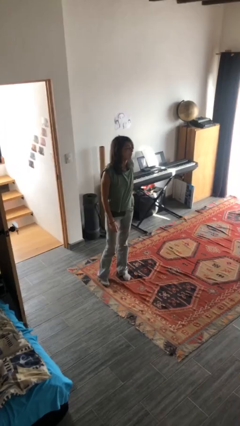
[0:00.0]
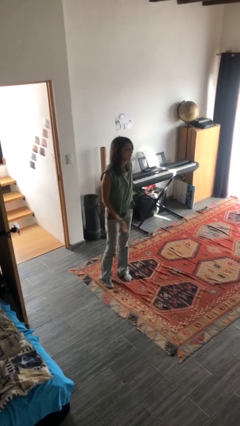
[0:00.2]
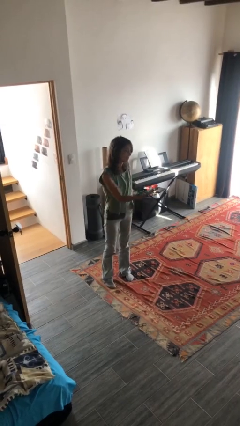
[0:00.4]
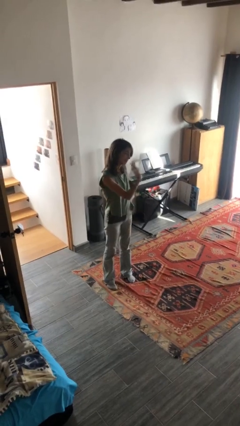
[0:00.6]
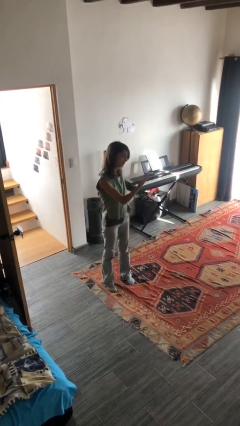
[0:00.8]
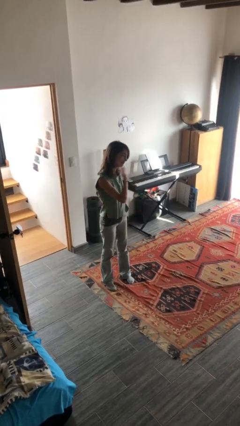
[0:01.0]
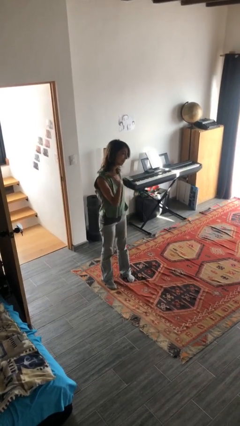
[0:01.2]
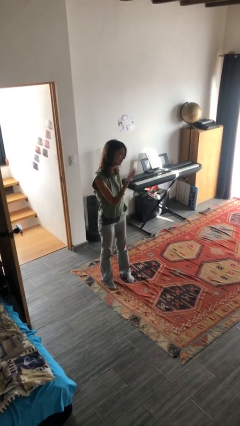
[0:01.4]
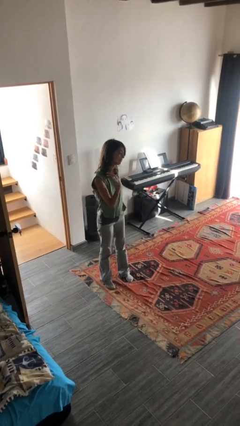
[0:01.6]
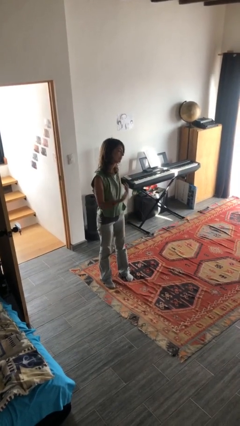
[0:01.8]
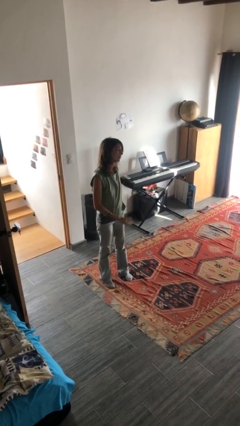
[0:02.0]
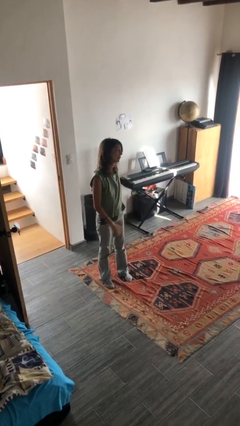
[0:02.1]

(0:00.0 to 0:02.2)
person gestures come here

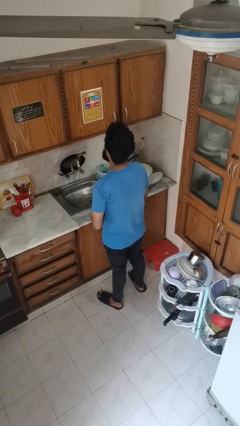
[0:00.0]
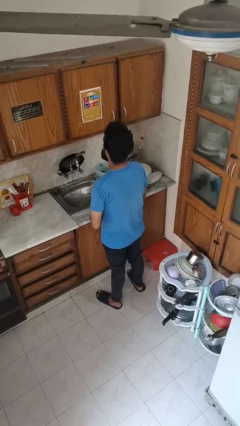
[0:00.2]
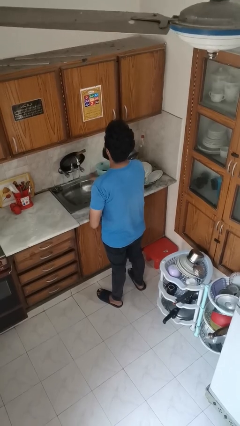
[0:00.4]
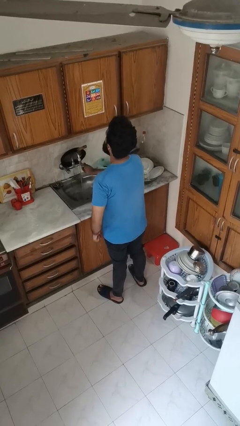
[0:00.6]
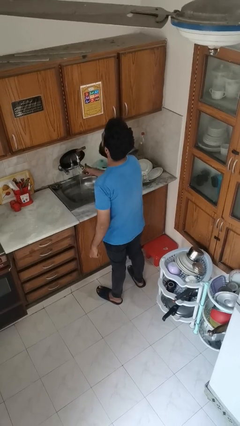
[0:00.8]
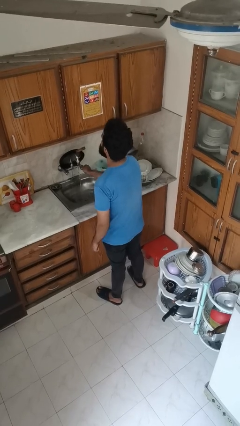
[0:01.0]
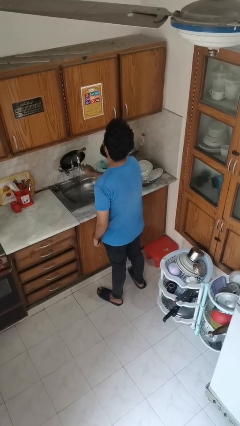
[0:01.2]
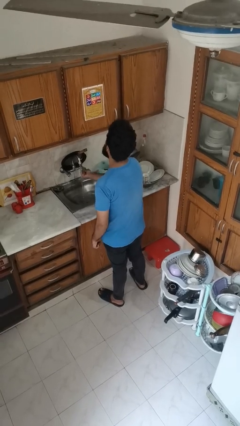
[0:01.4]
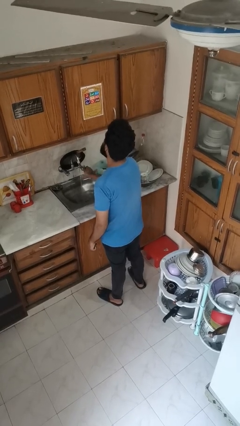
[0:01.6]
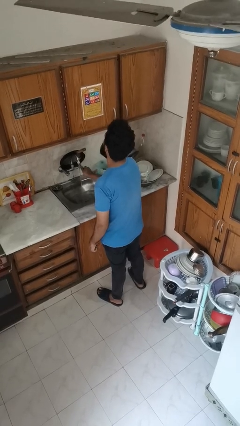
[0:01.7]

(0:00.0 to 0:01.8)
person turns off faucet

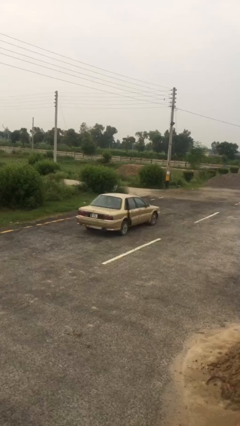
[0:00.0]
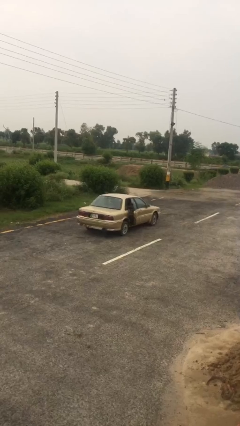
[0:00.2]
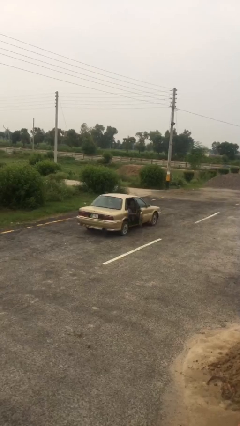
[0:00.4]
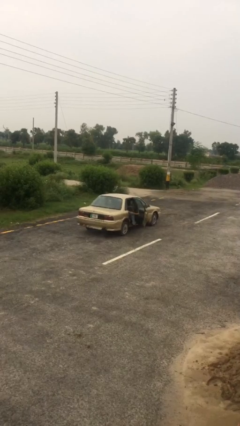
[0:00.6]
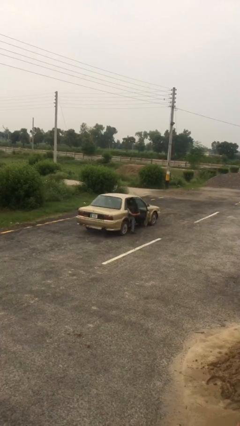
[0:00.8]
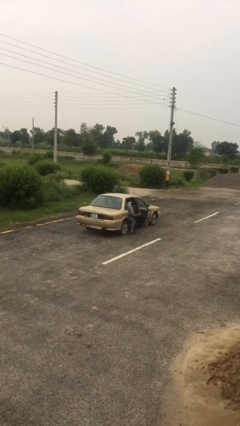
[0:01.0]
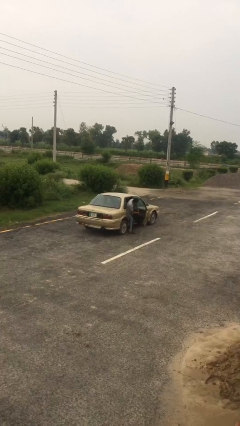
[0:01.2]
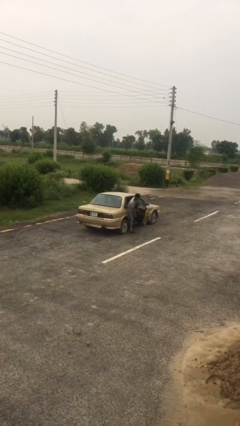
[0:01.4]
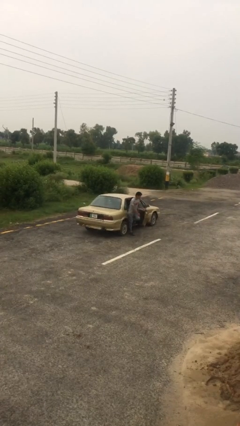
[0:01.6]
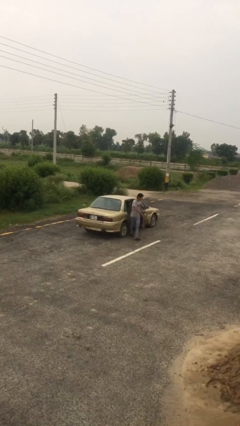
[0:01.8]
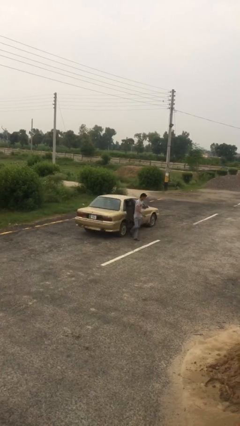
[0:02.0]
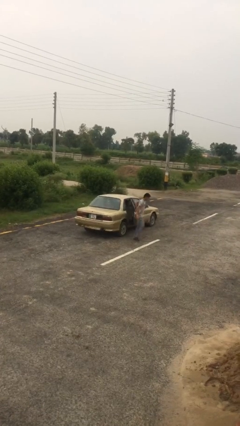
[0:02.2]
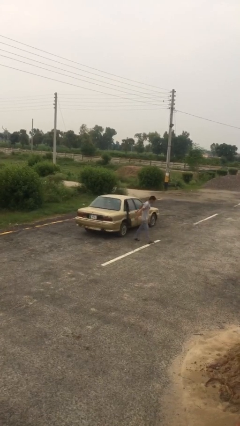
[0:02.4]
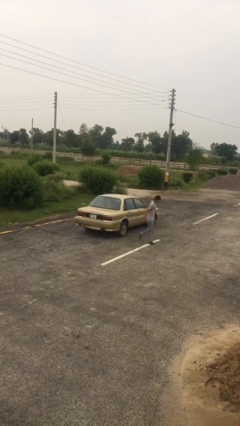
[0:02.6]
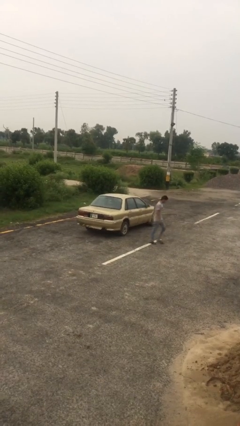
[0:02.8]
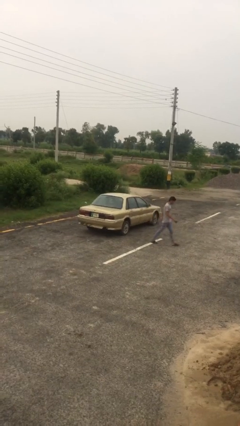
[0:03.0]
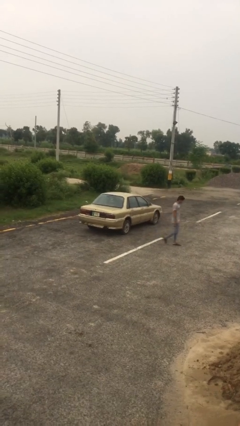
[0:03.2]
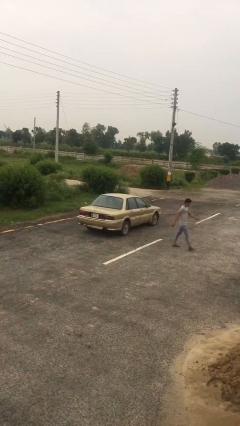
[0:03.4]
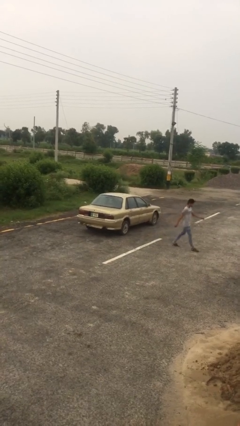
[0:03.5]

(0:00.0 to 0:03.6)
car drops off person

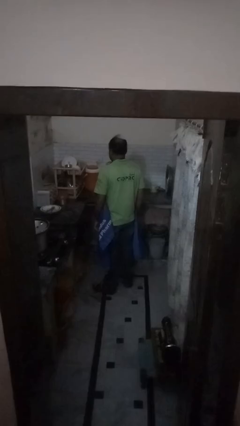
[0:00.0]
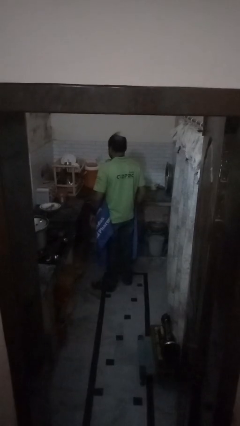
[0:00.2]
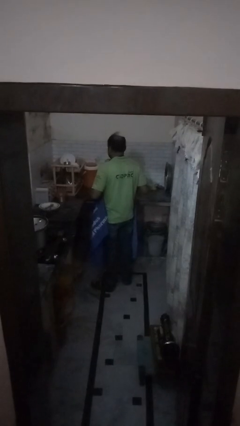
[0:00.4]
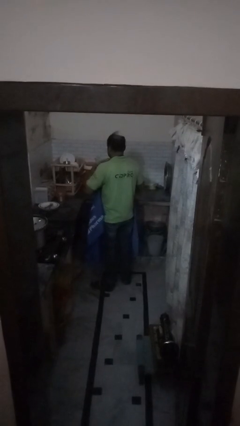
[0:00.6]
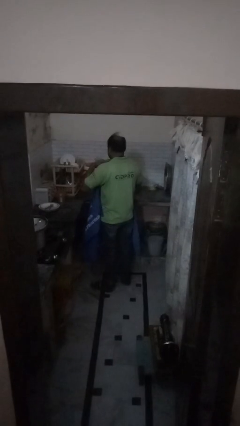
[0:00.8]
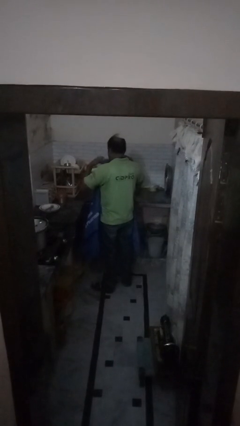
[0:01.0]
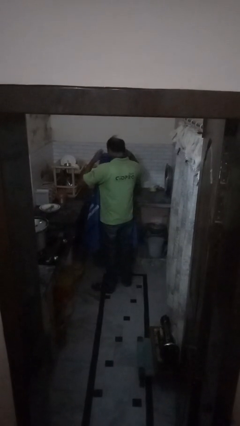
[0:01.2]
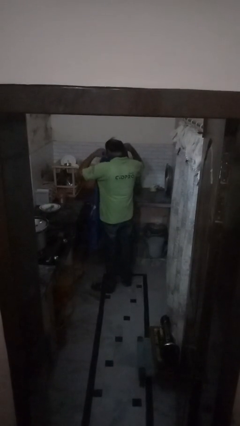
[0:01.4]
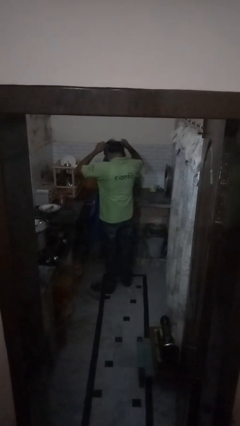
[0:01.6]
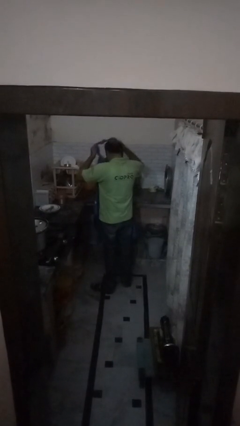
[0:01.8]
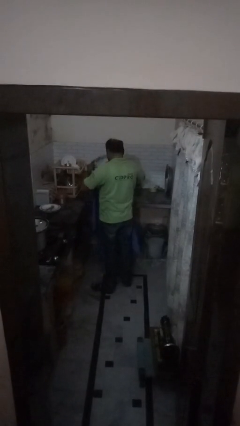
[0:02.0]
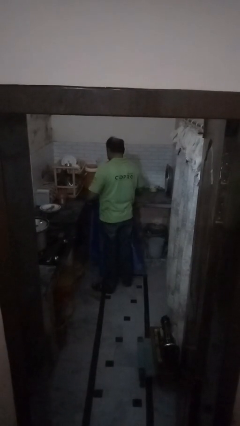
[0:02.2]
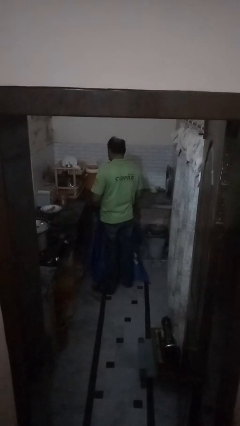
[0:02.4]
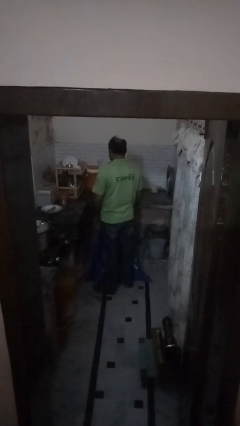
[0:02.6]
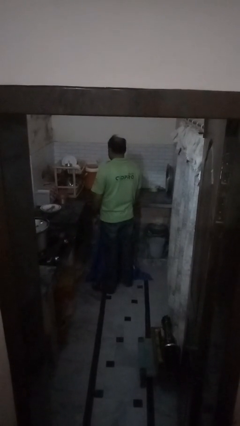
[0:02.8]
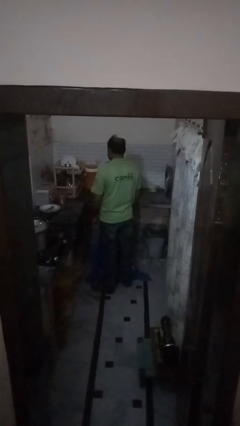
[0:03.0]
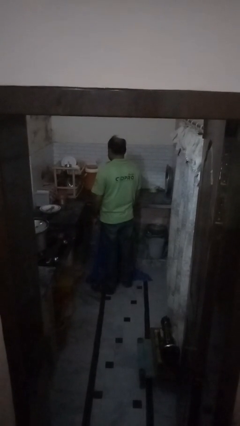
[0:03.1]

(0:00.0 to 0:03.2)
person takes off apron

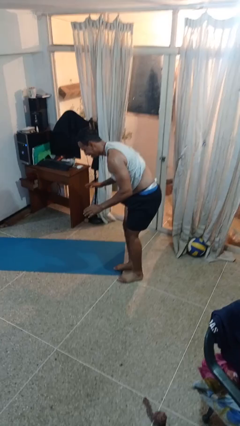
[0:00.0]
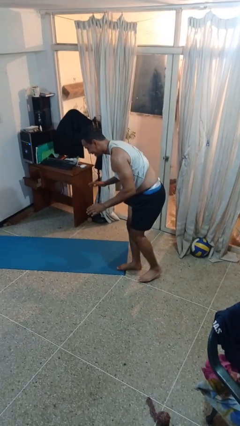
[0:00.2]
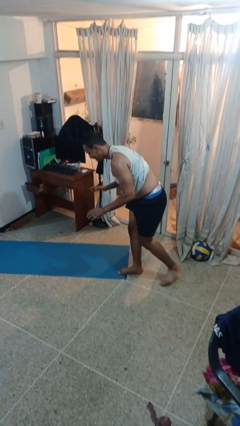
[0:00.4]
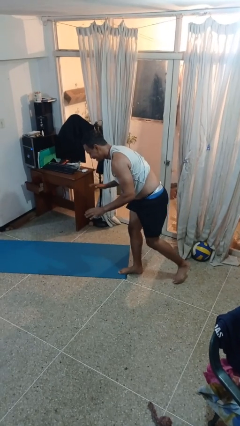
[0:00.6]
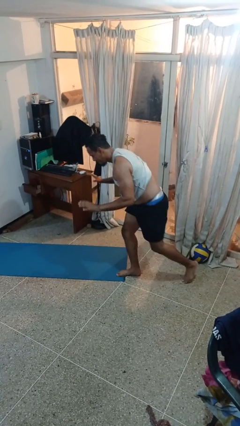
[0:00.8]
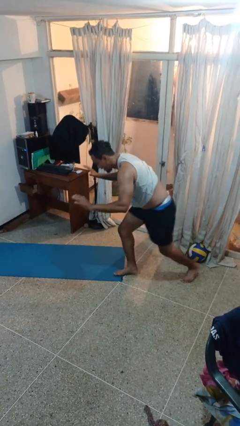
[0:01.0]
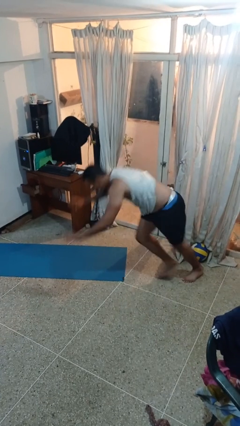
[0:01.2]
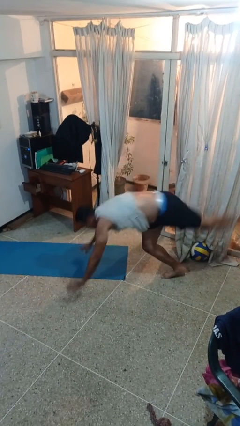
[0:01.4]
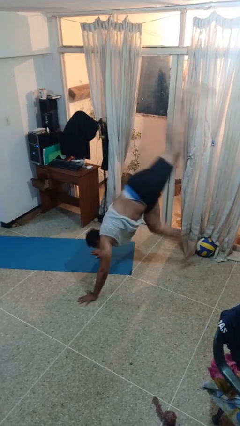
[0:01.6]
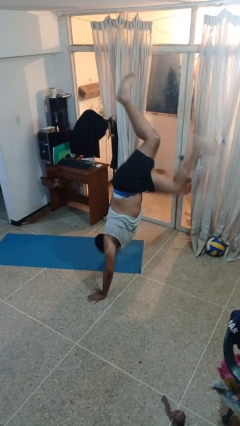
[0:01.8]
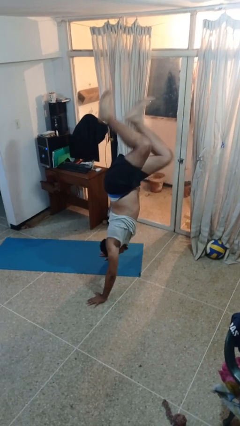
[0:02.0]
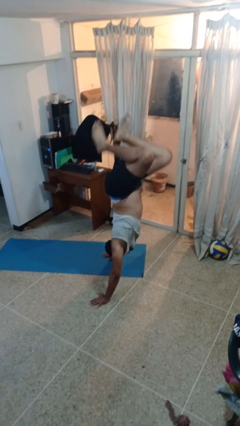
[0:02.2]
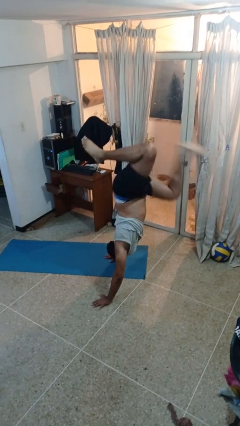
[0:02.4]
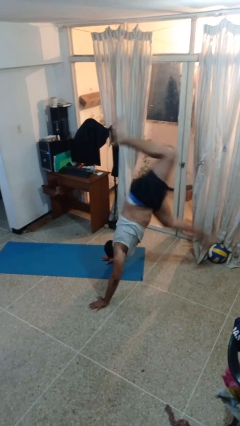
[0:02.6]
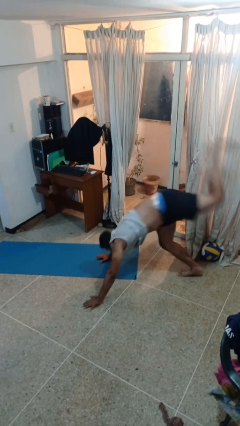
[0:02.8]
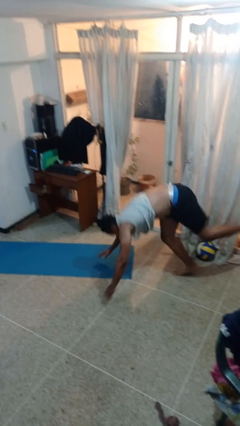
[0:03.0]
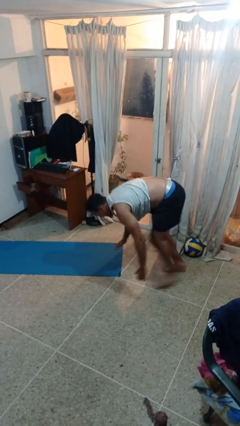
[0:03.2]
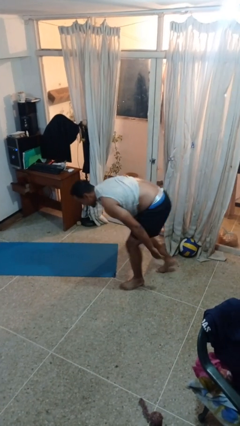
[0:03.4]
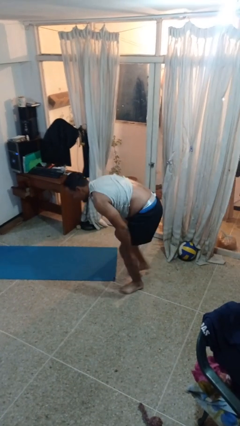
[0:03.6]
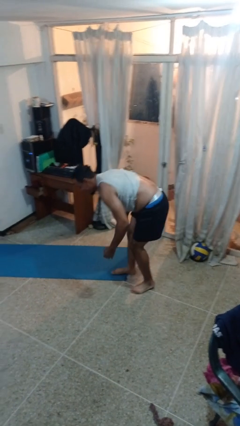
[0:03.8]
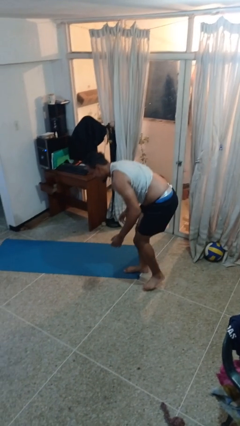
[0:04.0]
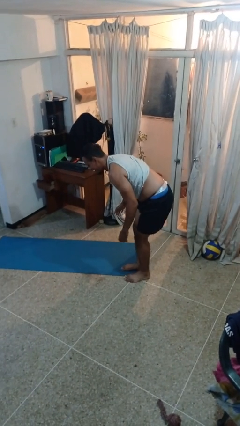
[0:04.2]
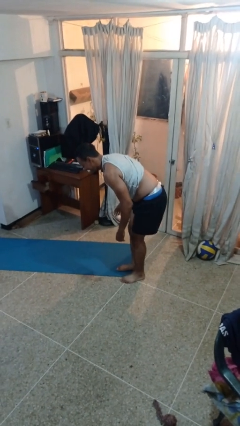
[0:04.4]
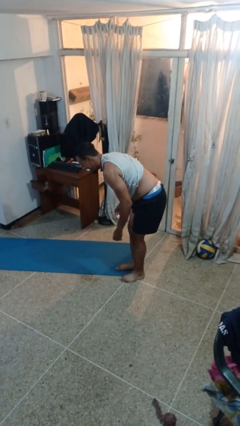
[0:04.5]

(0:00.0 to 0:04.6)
person handstand

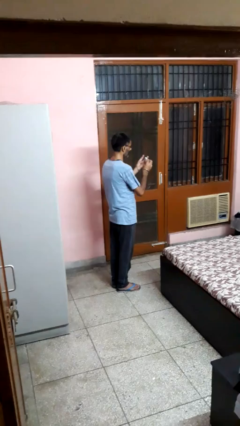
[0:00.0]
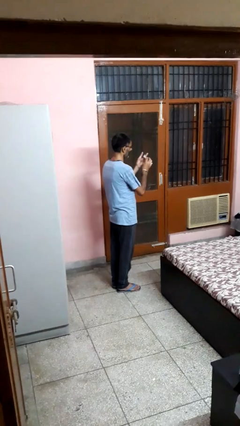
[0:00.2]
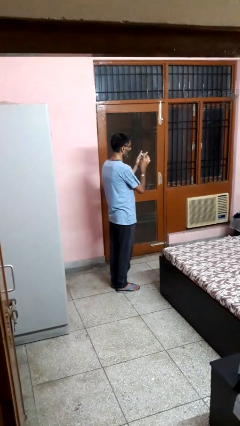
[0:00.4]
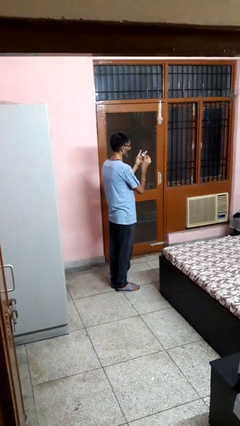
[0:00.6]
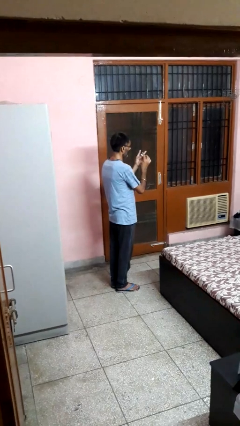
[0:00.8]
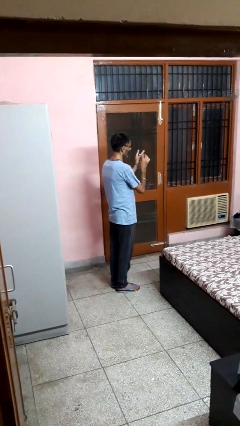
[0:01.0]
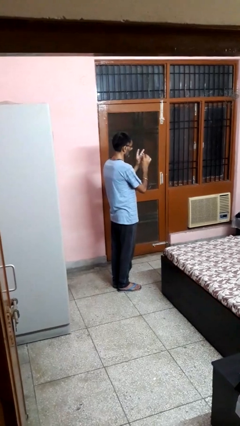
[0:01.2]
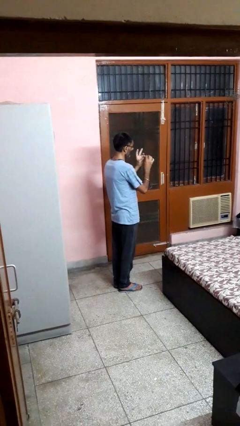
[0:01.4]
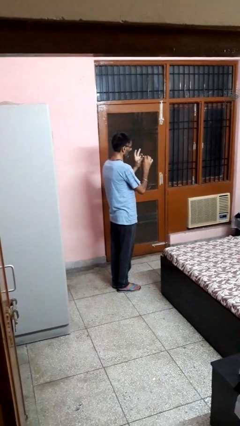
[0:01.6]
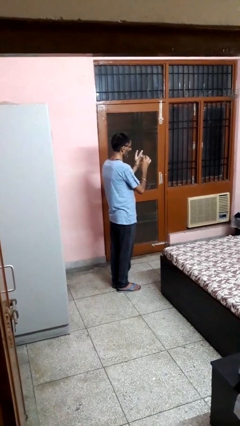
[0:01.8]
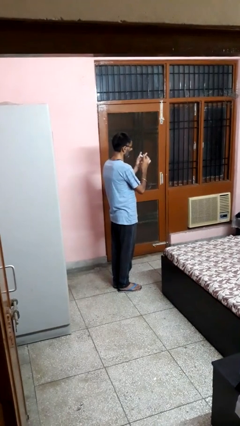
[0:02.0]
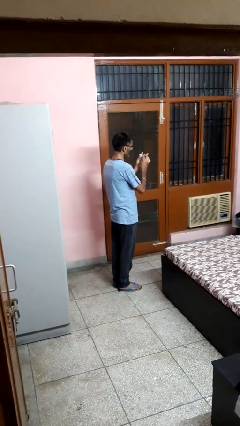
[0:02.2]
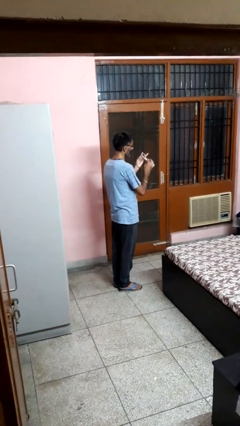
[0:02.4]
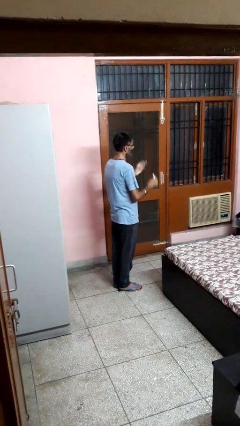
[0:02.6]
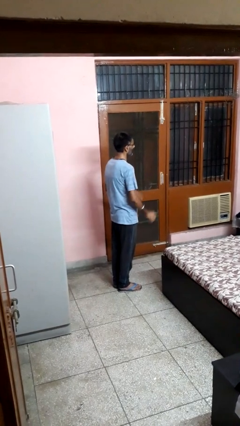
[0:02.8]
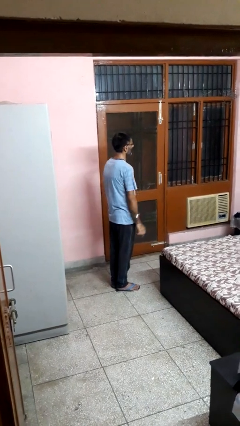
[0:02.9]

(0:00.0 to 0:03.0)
person files fingernails
